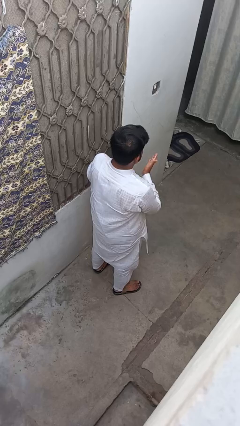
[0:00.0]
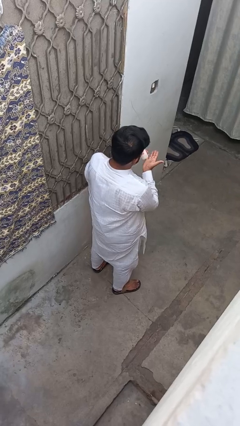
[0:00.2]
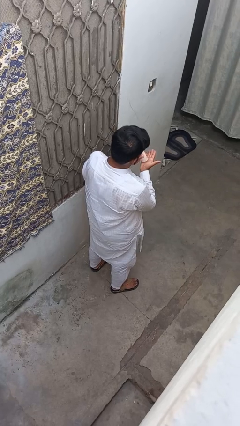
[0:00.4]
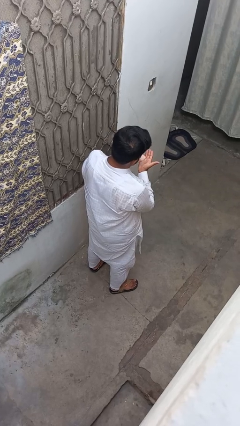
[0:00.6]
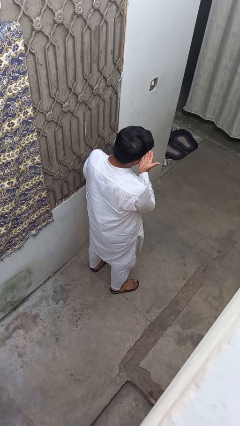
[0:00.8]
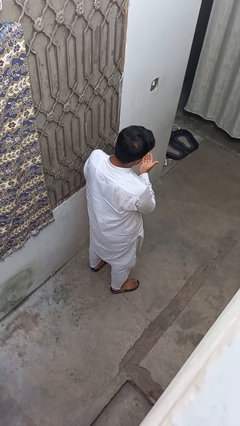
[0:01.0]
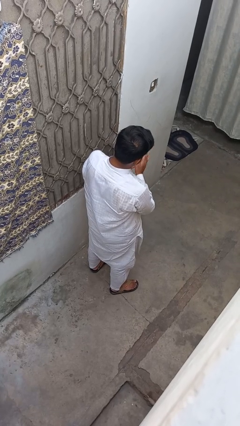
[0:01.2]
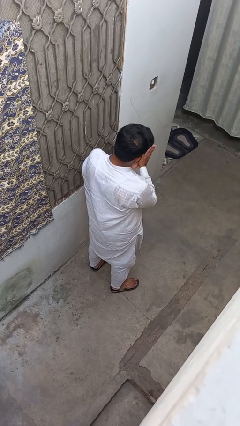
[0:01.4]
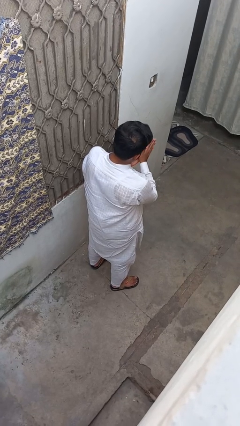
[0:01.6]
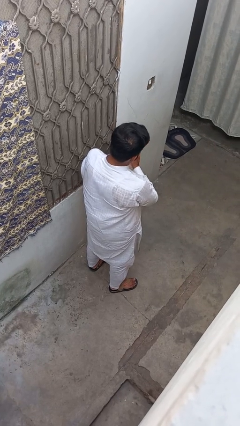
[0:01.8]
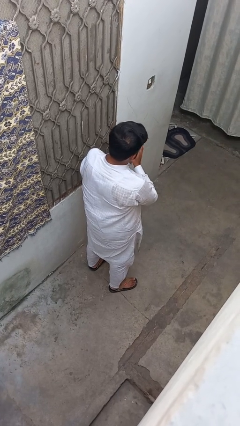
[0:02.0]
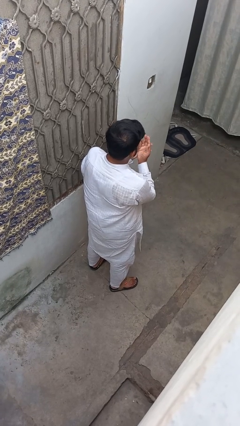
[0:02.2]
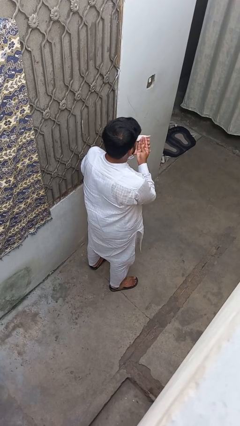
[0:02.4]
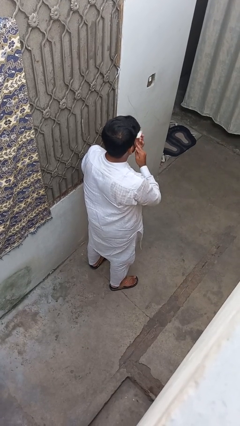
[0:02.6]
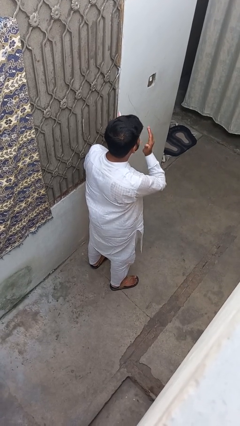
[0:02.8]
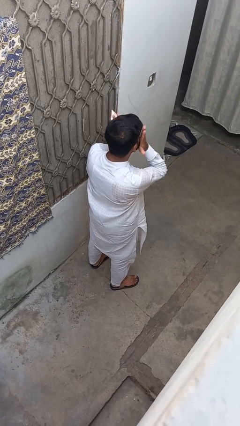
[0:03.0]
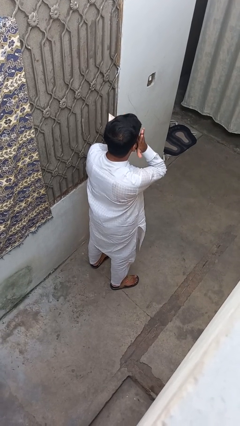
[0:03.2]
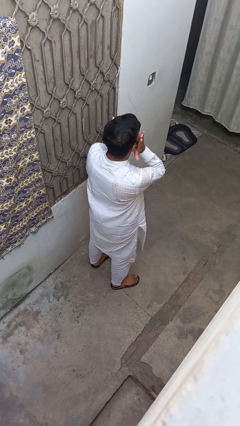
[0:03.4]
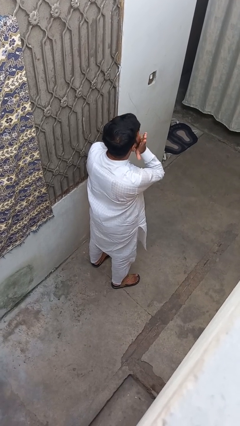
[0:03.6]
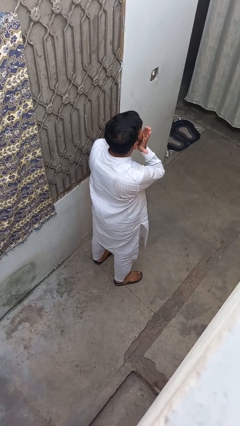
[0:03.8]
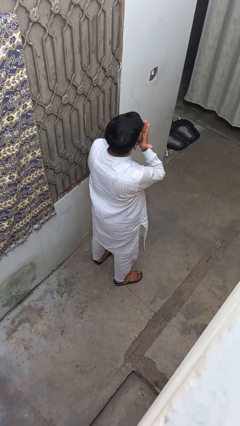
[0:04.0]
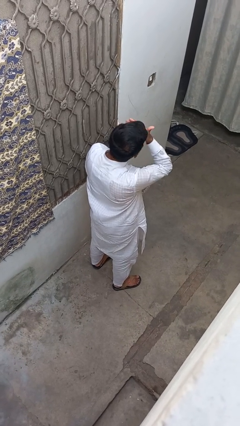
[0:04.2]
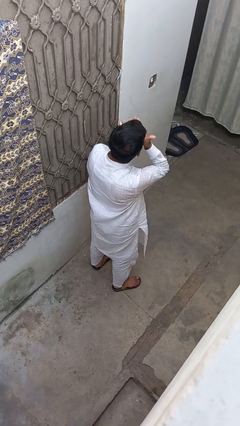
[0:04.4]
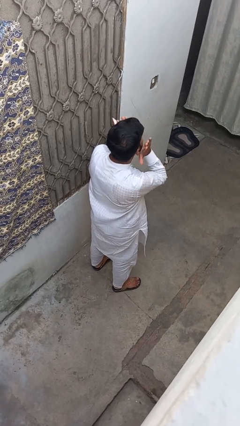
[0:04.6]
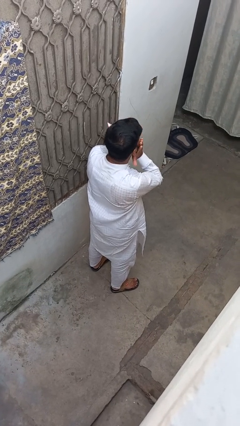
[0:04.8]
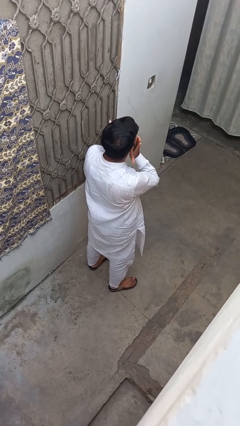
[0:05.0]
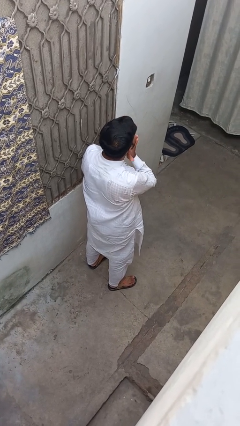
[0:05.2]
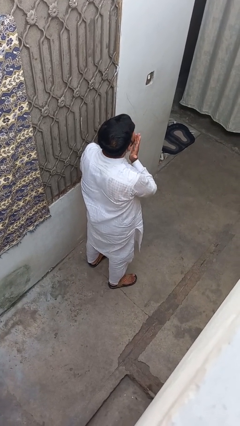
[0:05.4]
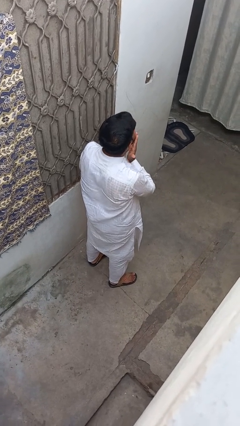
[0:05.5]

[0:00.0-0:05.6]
person applies facial moisturizer

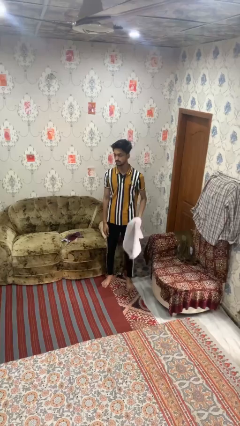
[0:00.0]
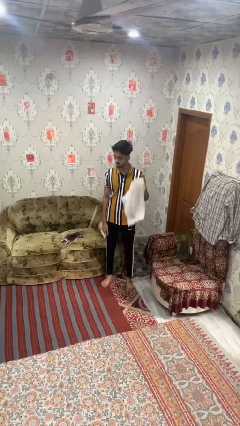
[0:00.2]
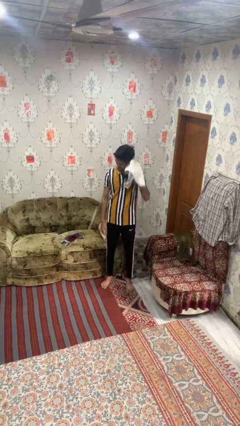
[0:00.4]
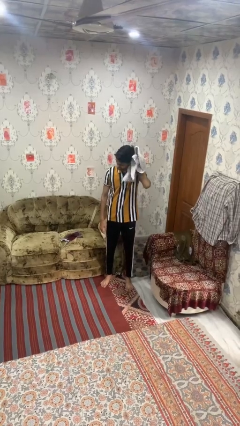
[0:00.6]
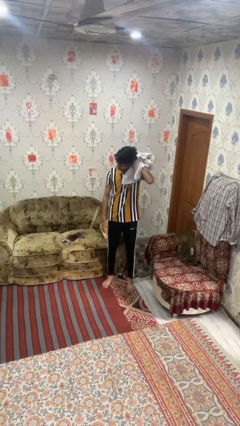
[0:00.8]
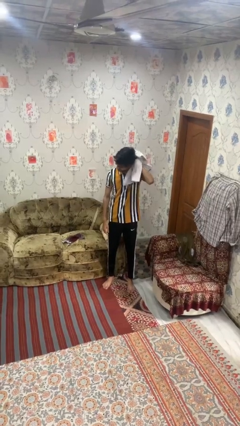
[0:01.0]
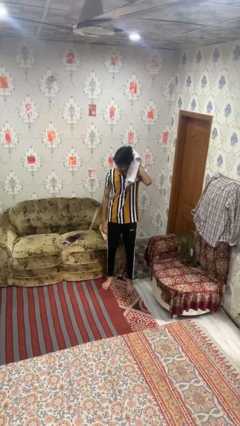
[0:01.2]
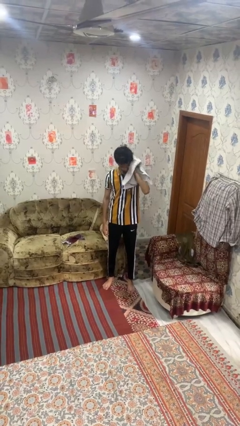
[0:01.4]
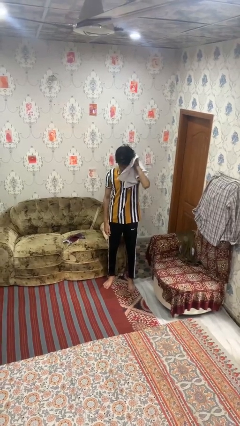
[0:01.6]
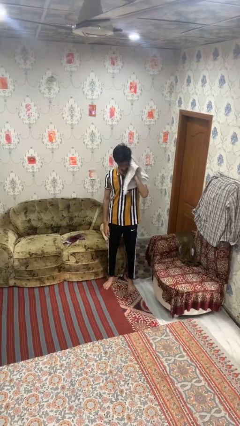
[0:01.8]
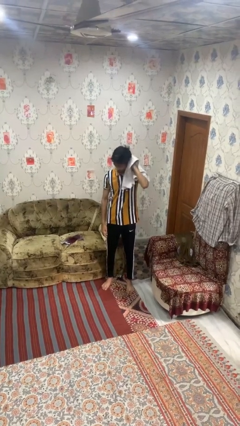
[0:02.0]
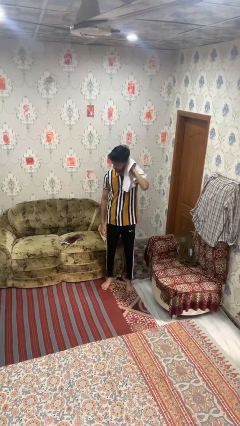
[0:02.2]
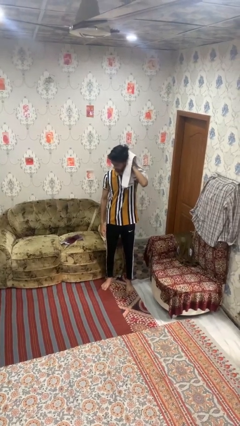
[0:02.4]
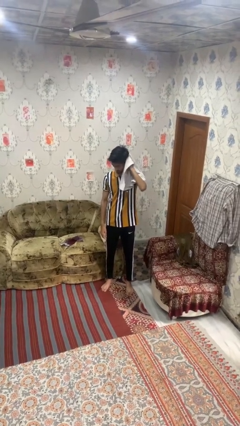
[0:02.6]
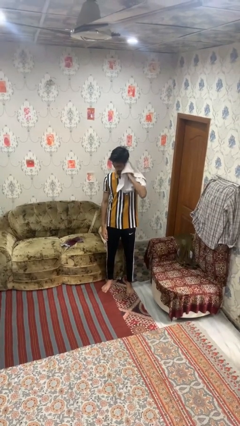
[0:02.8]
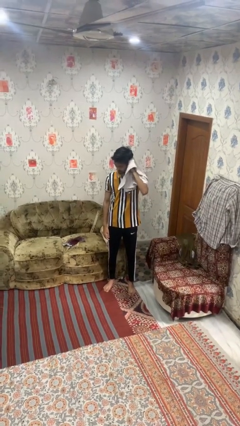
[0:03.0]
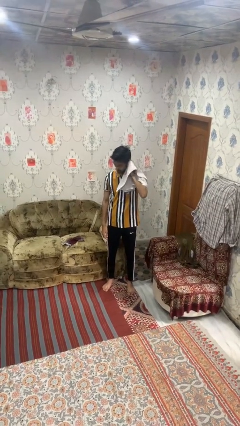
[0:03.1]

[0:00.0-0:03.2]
person dries hair with towel

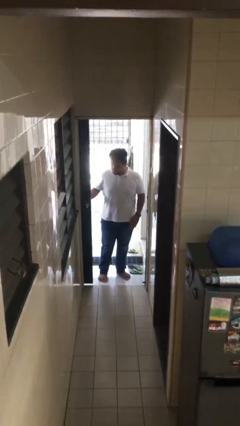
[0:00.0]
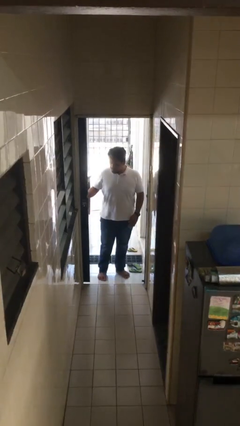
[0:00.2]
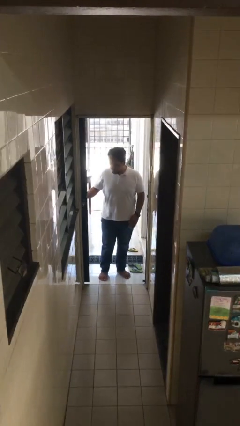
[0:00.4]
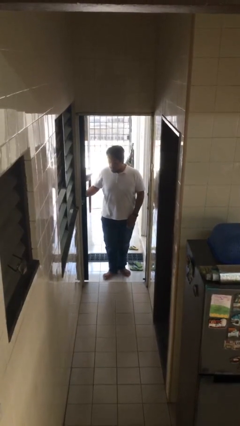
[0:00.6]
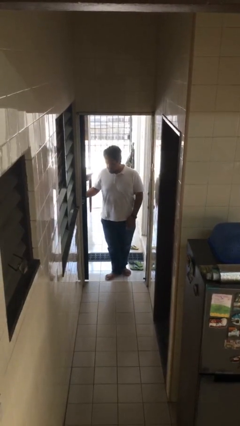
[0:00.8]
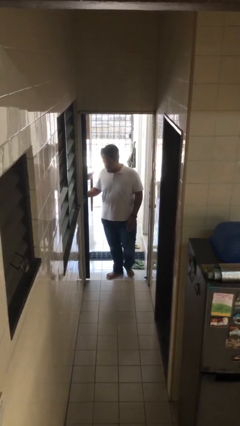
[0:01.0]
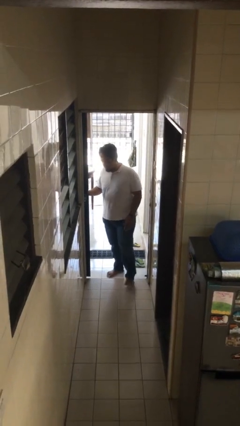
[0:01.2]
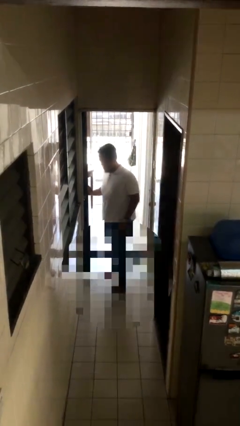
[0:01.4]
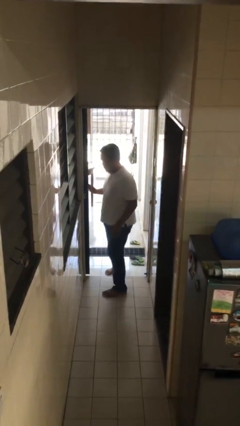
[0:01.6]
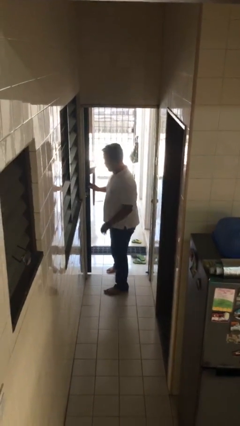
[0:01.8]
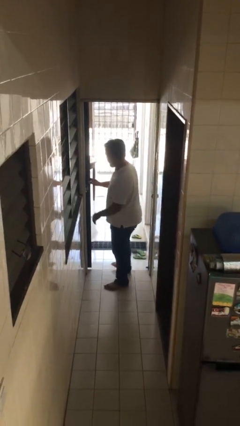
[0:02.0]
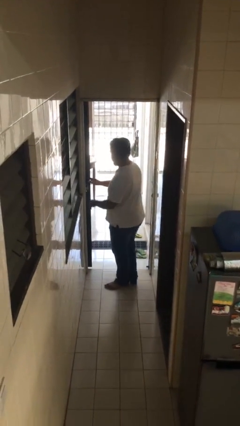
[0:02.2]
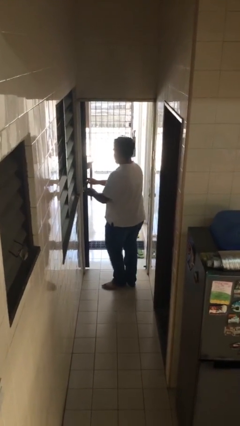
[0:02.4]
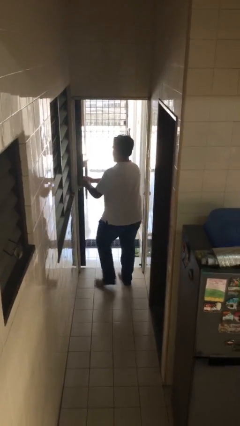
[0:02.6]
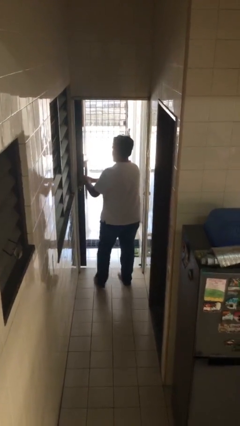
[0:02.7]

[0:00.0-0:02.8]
person enters scene through structure

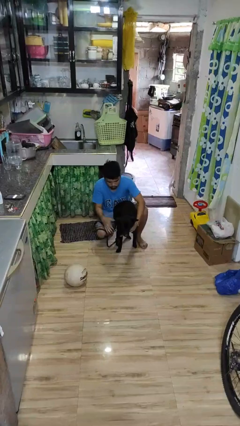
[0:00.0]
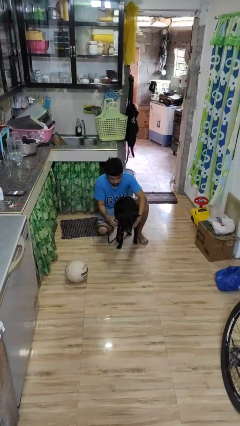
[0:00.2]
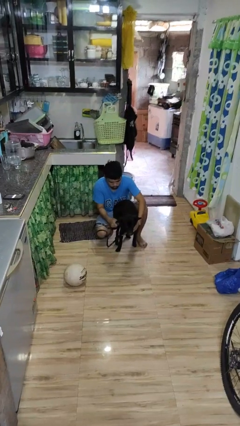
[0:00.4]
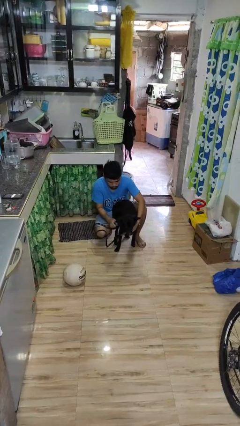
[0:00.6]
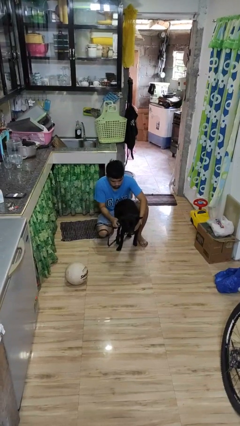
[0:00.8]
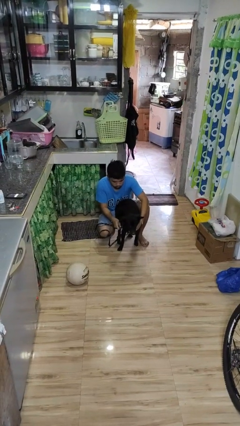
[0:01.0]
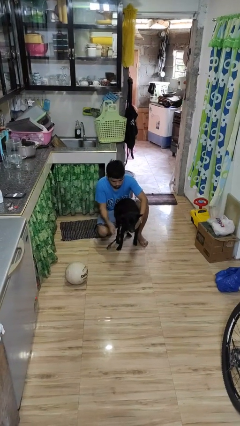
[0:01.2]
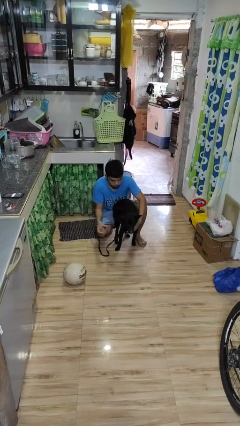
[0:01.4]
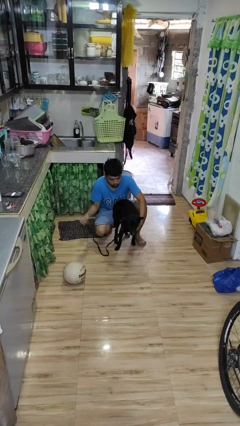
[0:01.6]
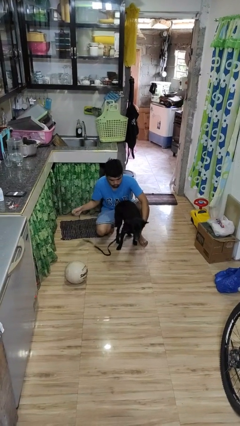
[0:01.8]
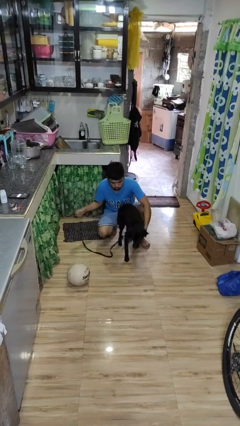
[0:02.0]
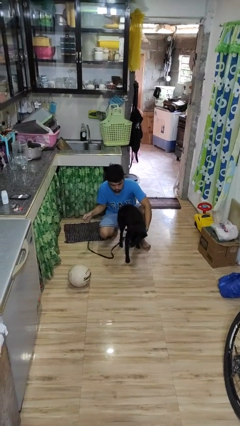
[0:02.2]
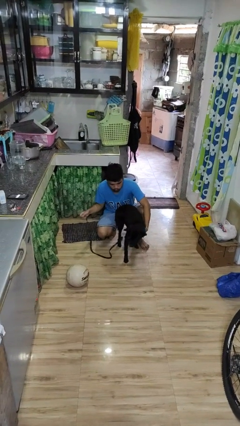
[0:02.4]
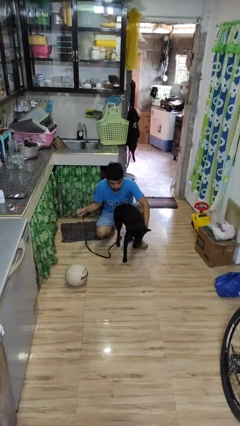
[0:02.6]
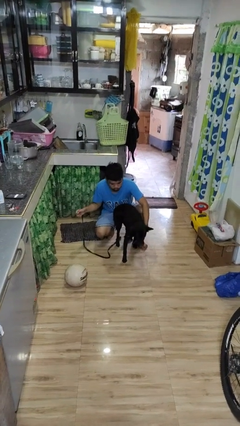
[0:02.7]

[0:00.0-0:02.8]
person unattaches leash from dog

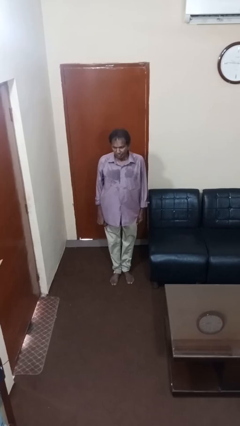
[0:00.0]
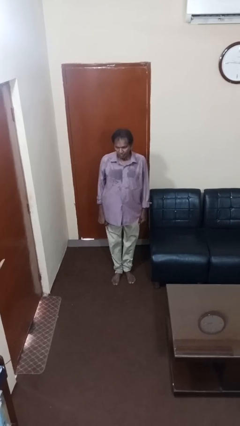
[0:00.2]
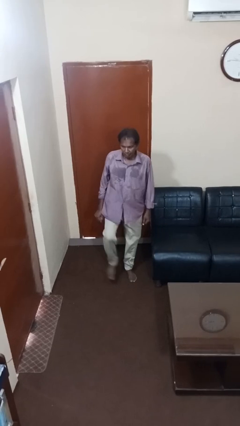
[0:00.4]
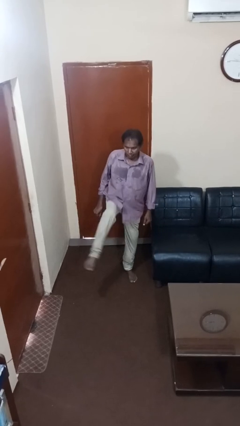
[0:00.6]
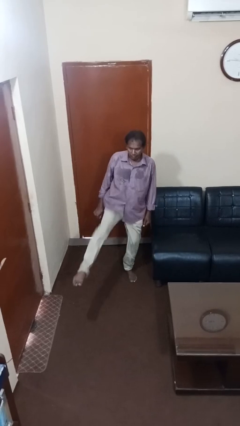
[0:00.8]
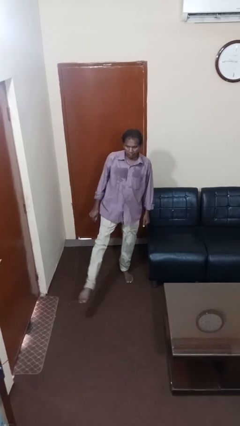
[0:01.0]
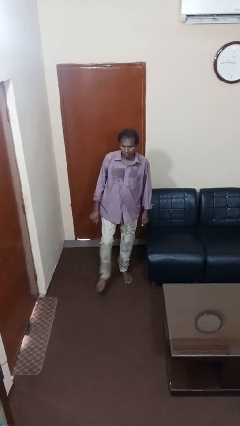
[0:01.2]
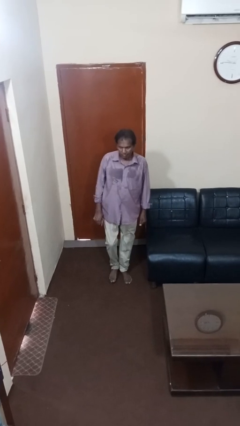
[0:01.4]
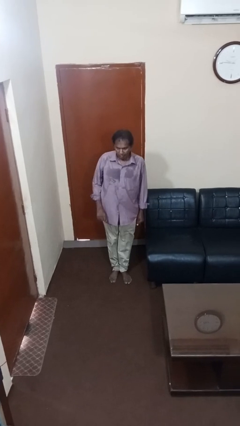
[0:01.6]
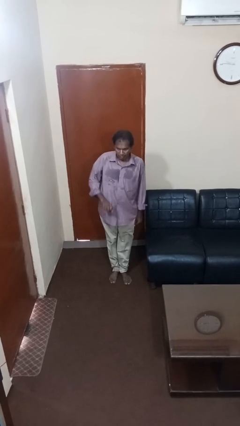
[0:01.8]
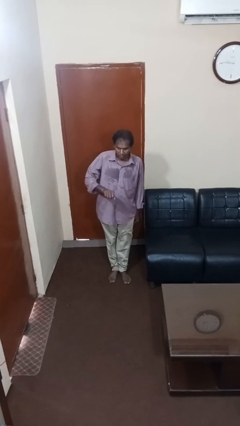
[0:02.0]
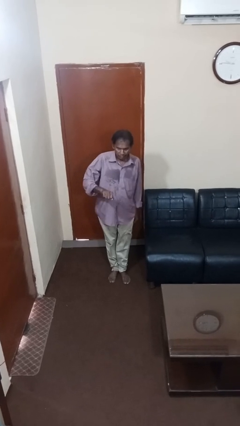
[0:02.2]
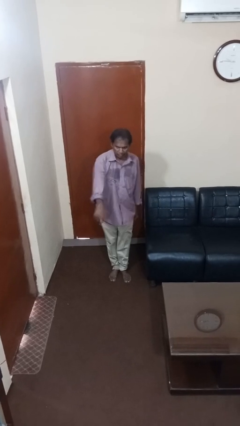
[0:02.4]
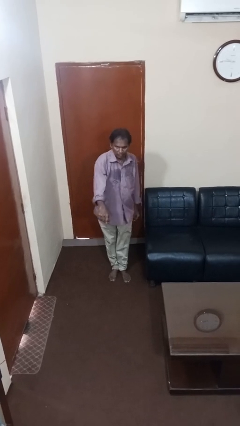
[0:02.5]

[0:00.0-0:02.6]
person karate kicks

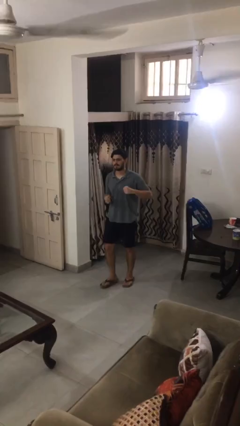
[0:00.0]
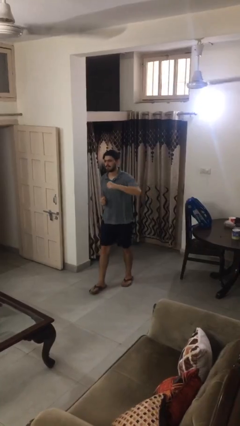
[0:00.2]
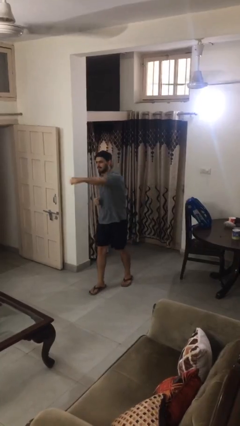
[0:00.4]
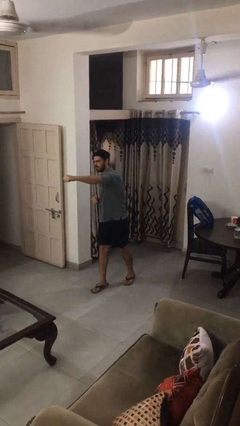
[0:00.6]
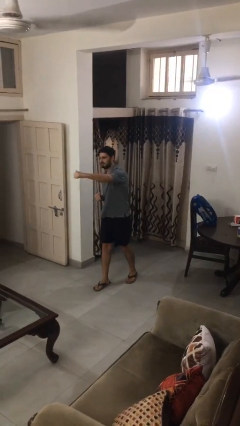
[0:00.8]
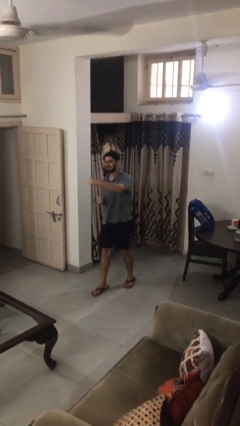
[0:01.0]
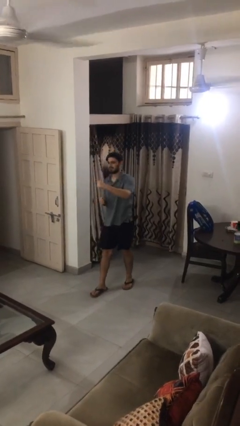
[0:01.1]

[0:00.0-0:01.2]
person punches
